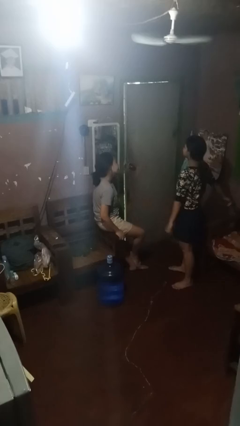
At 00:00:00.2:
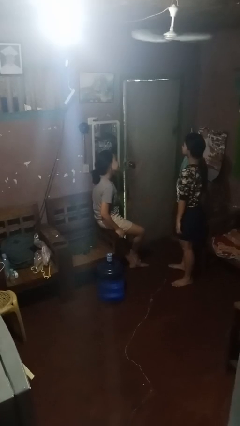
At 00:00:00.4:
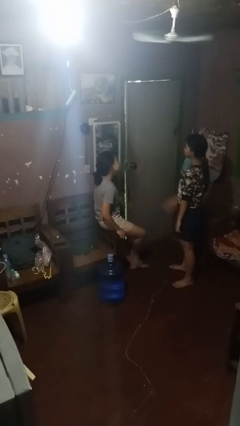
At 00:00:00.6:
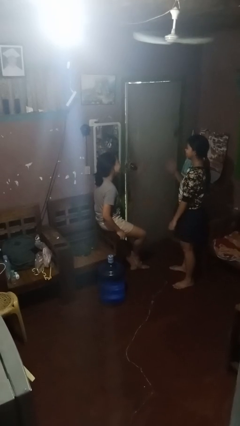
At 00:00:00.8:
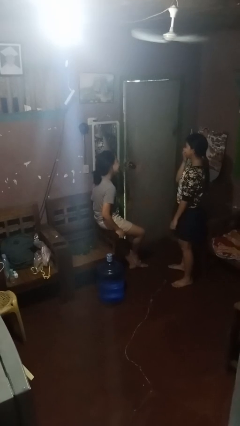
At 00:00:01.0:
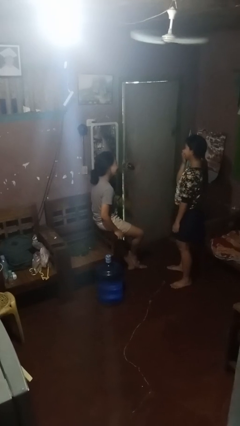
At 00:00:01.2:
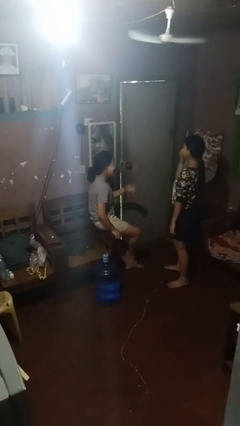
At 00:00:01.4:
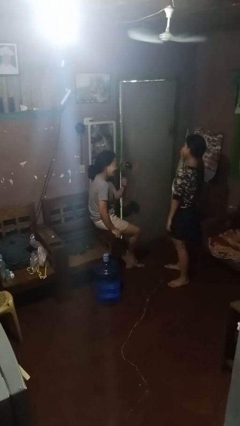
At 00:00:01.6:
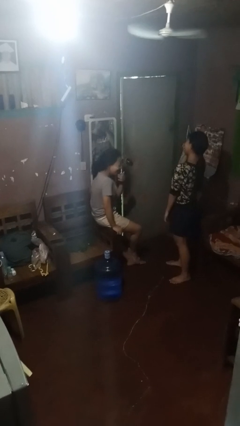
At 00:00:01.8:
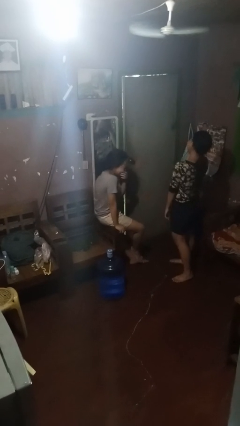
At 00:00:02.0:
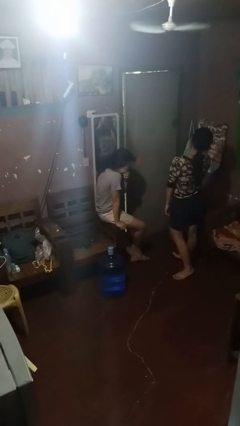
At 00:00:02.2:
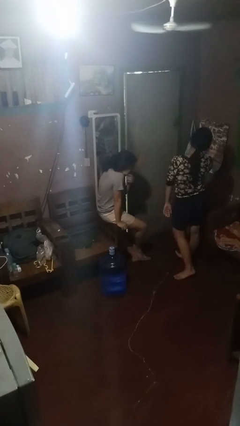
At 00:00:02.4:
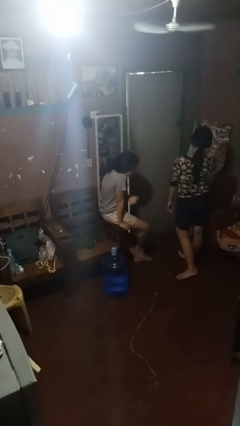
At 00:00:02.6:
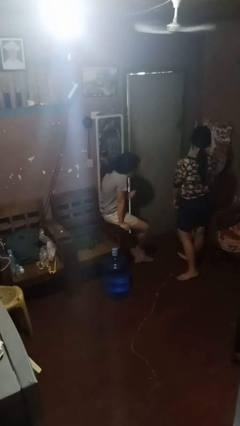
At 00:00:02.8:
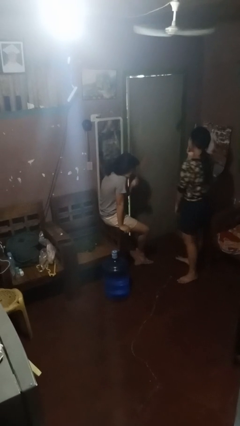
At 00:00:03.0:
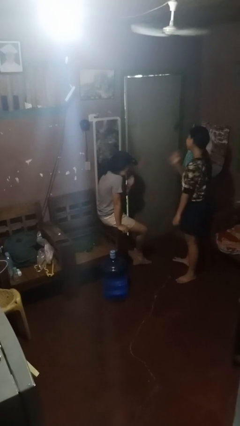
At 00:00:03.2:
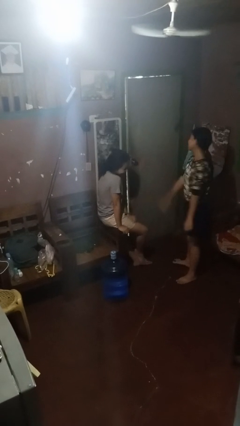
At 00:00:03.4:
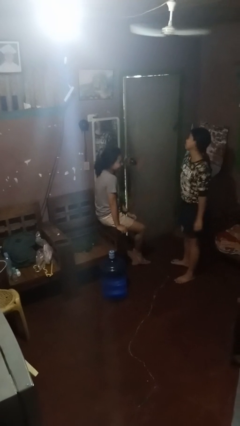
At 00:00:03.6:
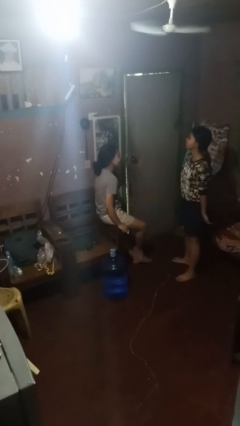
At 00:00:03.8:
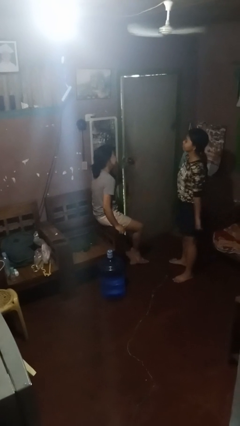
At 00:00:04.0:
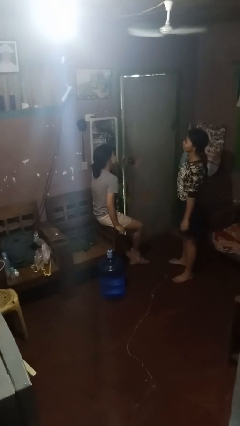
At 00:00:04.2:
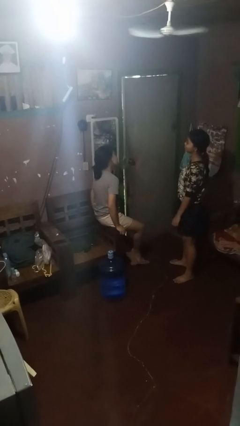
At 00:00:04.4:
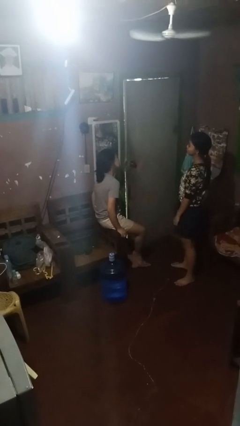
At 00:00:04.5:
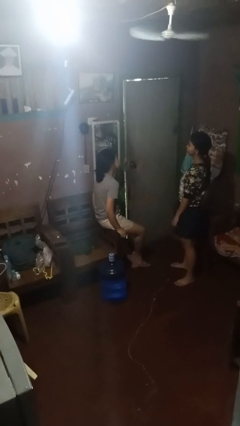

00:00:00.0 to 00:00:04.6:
person laughs with person

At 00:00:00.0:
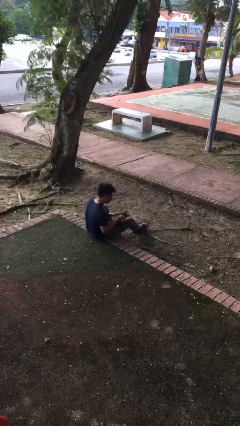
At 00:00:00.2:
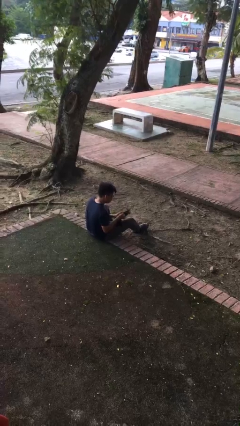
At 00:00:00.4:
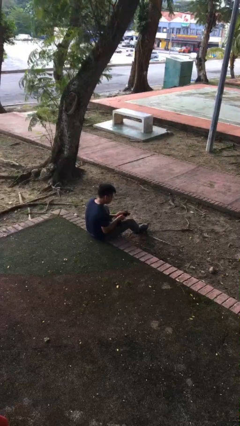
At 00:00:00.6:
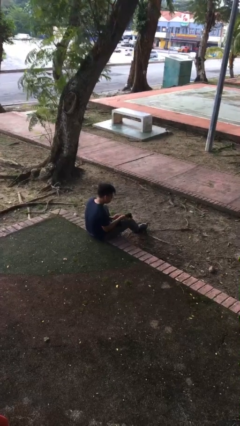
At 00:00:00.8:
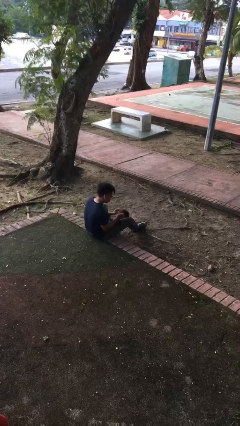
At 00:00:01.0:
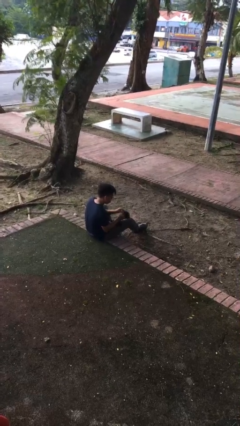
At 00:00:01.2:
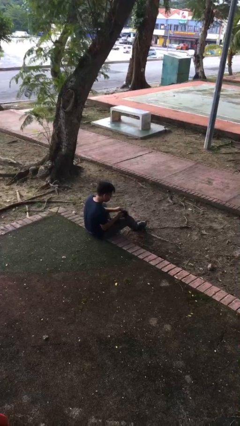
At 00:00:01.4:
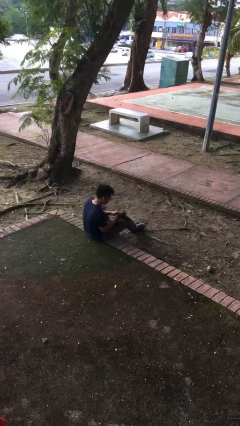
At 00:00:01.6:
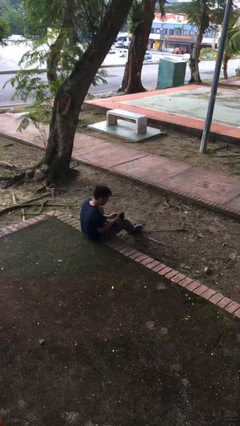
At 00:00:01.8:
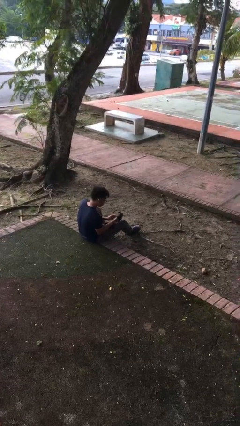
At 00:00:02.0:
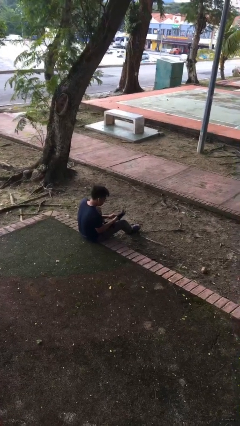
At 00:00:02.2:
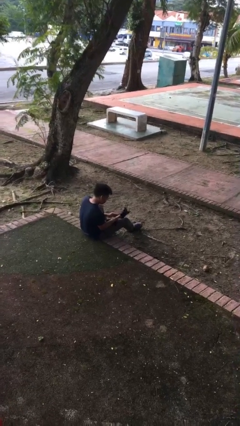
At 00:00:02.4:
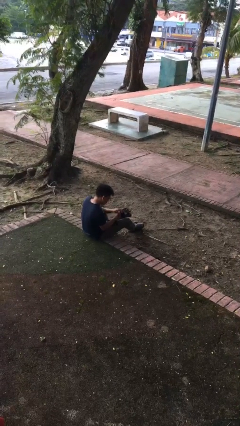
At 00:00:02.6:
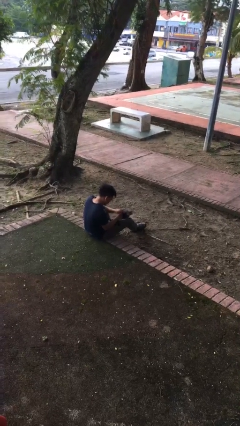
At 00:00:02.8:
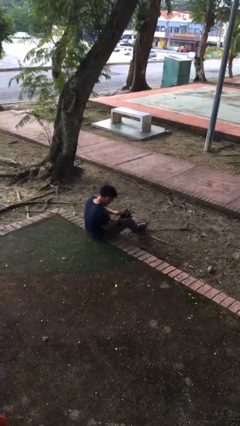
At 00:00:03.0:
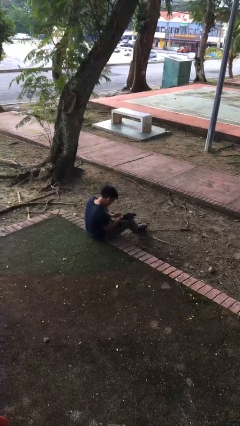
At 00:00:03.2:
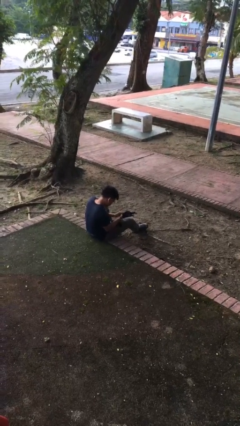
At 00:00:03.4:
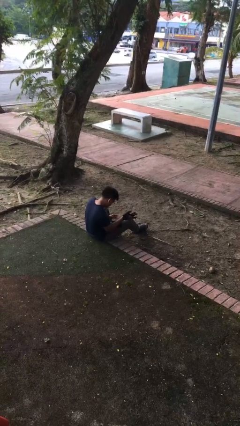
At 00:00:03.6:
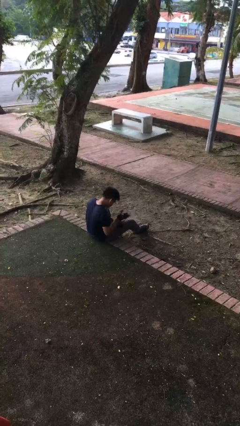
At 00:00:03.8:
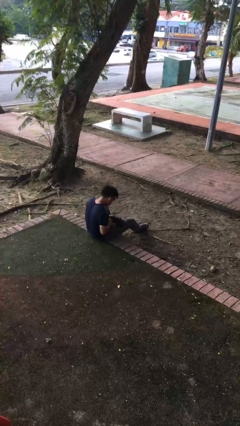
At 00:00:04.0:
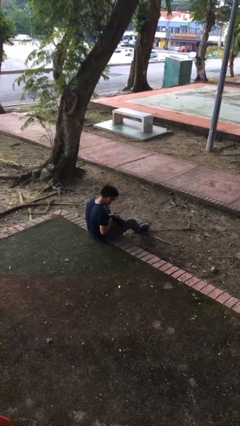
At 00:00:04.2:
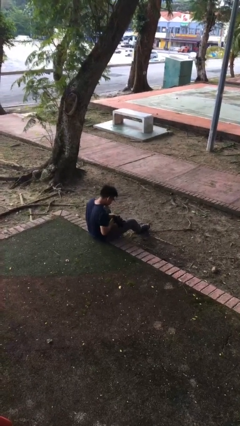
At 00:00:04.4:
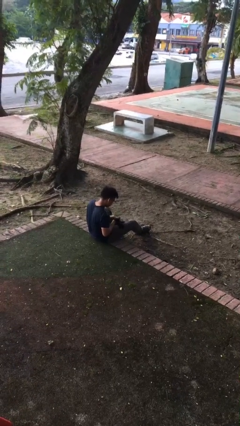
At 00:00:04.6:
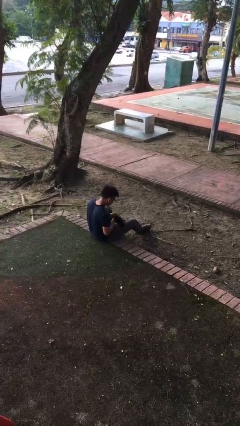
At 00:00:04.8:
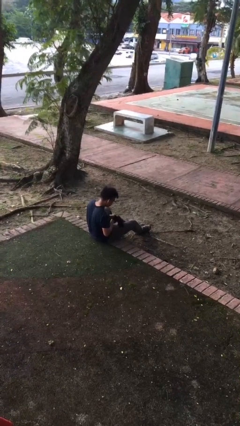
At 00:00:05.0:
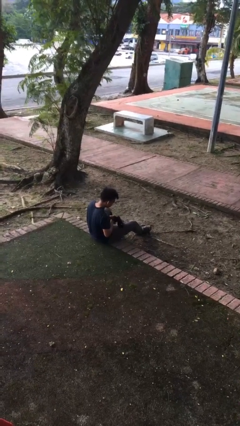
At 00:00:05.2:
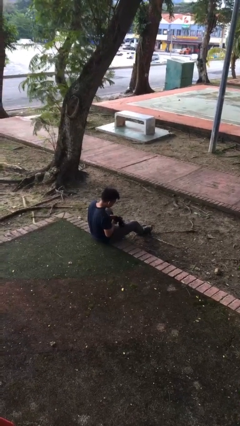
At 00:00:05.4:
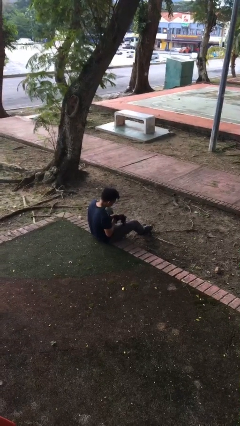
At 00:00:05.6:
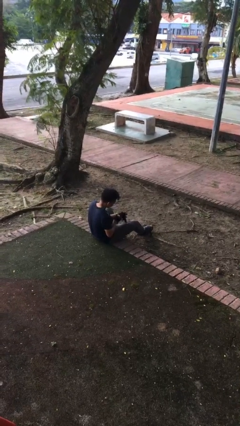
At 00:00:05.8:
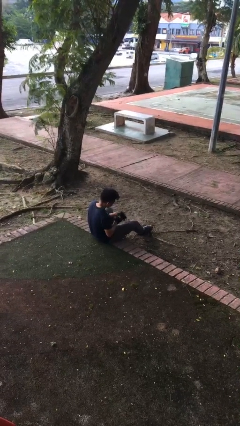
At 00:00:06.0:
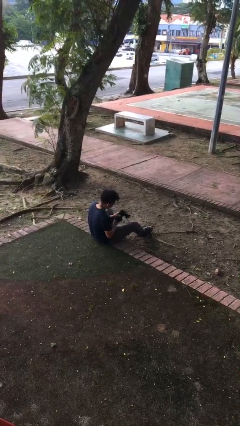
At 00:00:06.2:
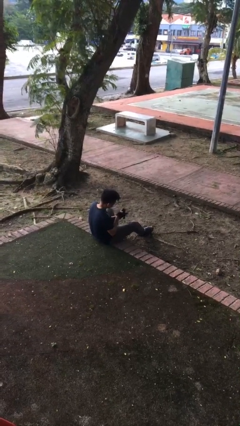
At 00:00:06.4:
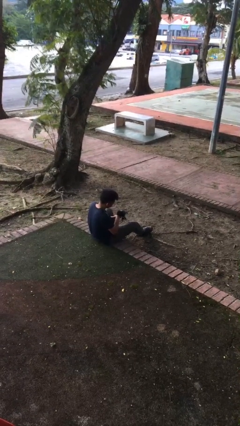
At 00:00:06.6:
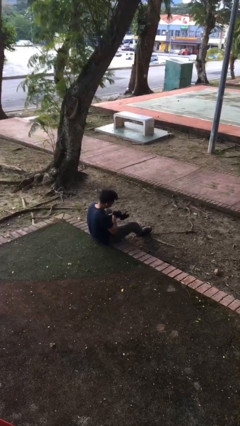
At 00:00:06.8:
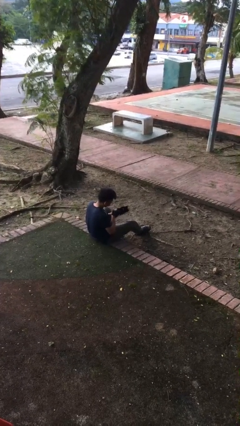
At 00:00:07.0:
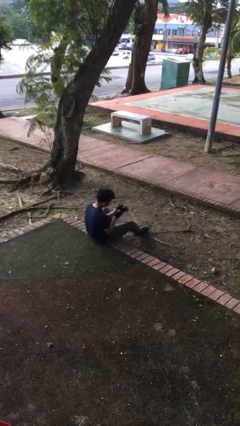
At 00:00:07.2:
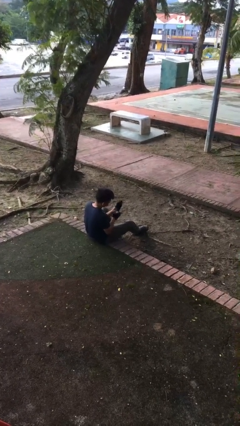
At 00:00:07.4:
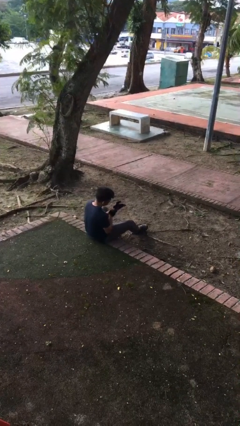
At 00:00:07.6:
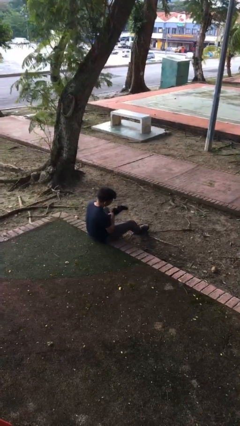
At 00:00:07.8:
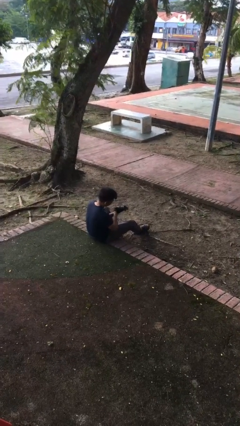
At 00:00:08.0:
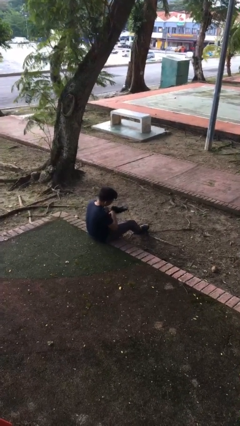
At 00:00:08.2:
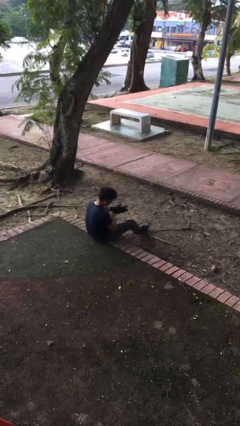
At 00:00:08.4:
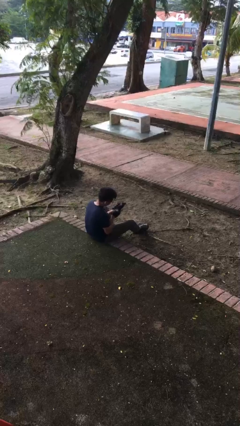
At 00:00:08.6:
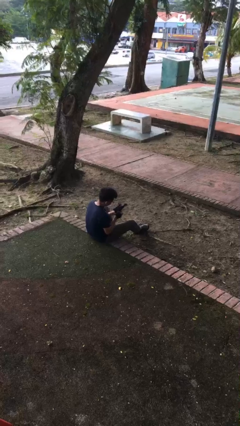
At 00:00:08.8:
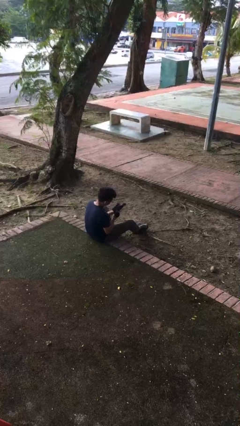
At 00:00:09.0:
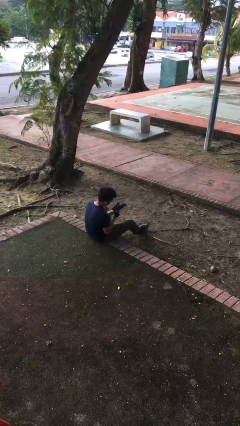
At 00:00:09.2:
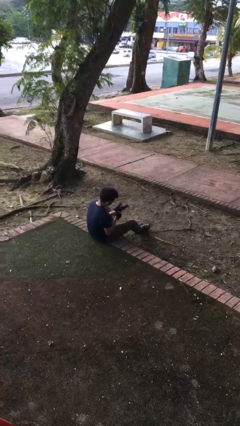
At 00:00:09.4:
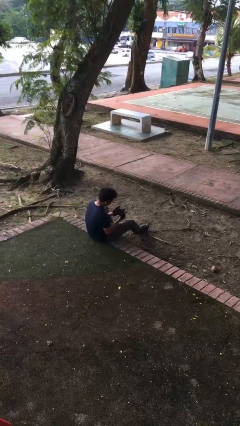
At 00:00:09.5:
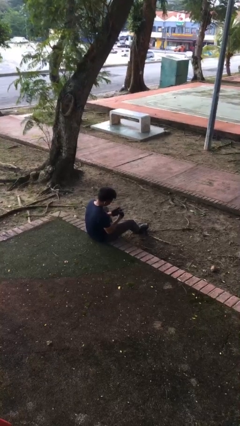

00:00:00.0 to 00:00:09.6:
person puts on gloves

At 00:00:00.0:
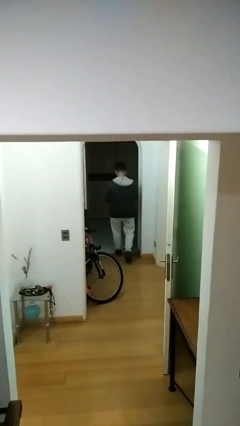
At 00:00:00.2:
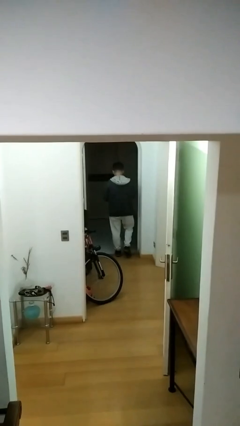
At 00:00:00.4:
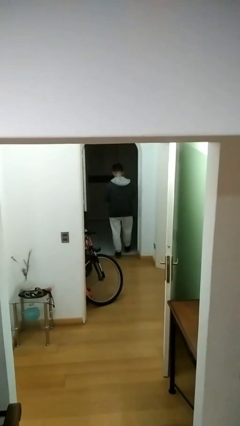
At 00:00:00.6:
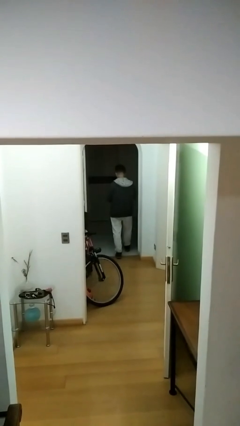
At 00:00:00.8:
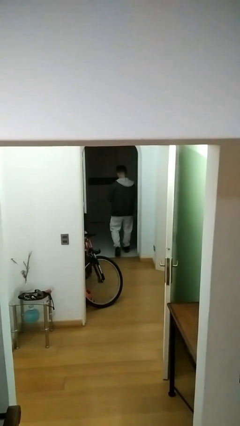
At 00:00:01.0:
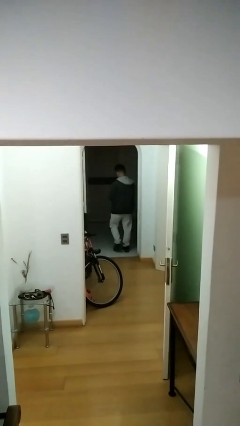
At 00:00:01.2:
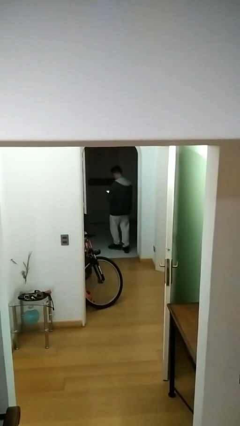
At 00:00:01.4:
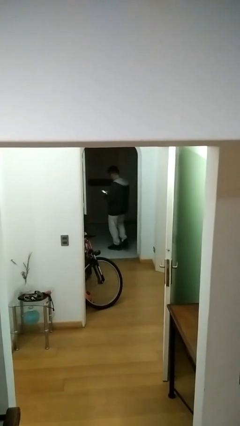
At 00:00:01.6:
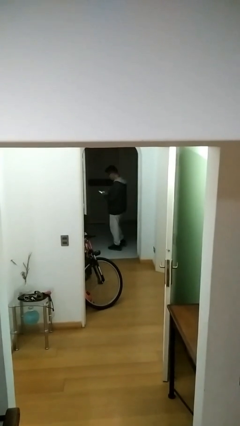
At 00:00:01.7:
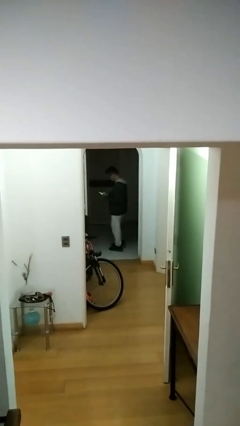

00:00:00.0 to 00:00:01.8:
person exits scene through structure

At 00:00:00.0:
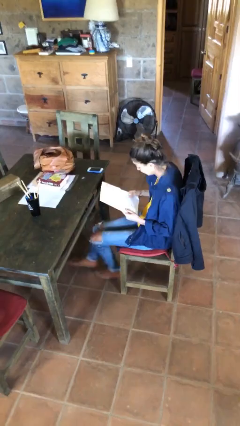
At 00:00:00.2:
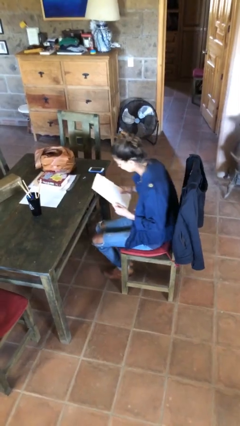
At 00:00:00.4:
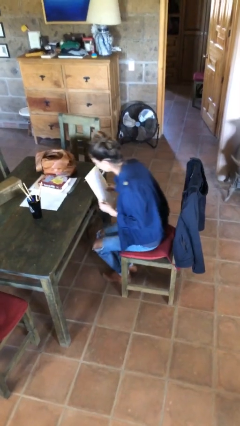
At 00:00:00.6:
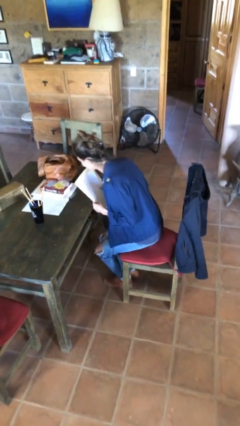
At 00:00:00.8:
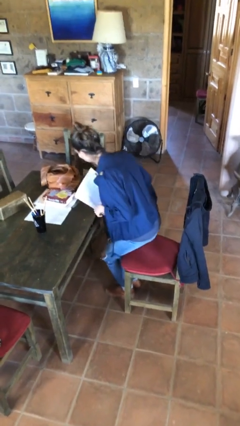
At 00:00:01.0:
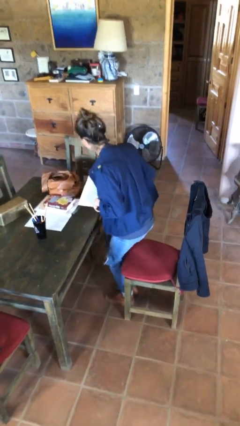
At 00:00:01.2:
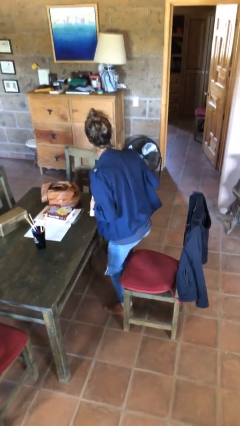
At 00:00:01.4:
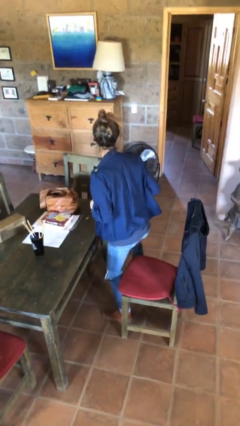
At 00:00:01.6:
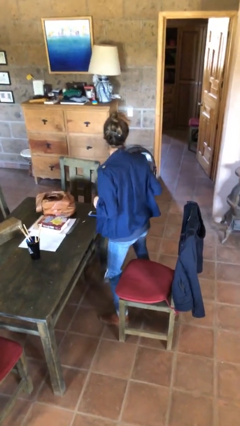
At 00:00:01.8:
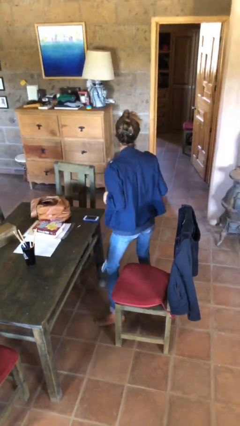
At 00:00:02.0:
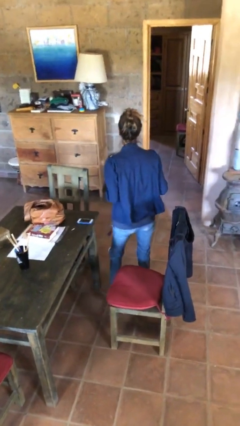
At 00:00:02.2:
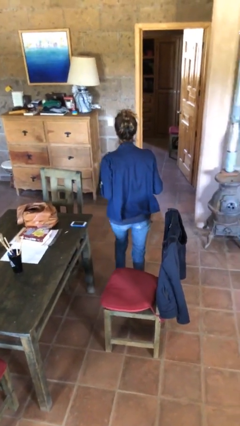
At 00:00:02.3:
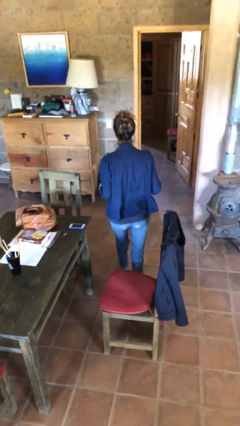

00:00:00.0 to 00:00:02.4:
person stands up
